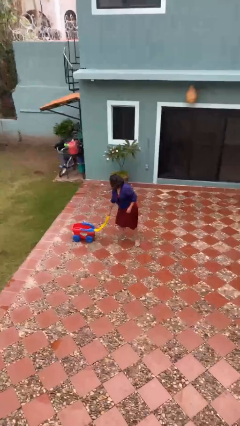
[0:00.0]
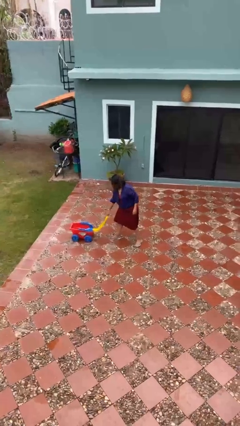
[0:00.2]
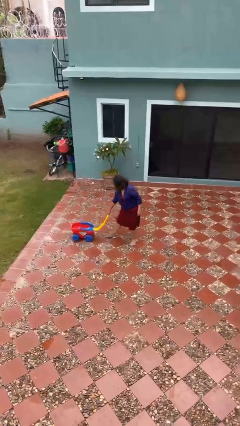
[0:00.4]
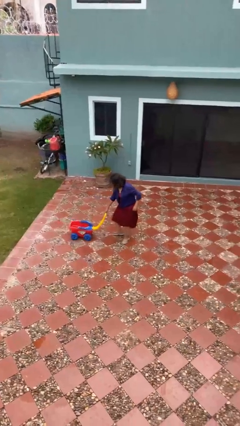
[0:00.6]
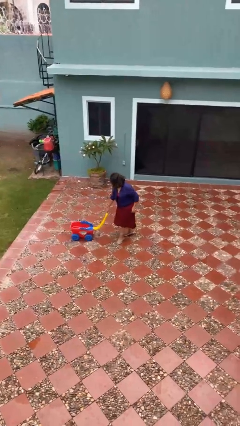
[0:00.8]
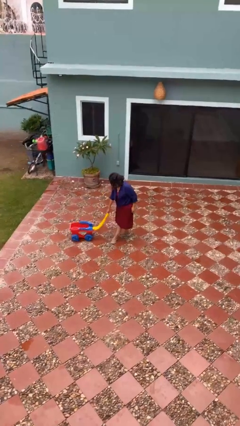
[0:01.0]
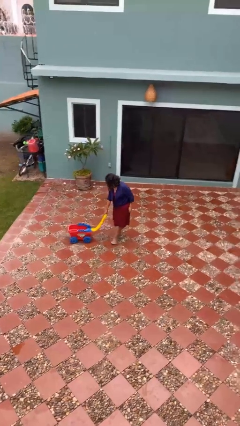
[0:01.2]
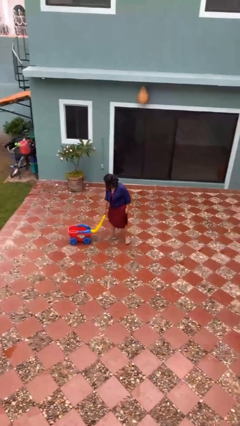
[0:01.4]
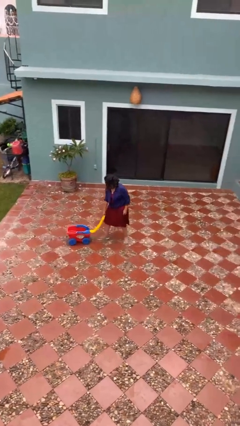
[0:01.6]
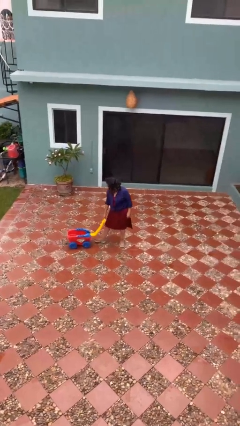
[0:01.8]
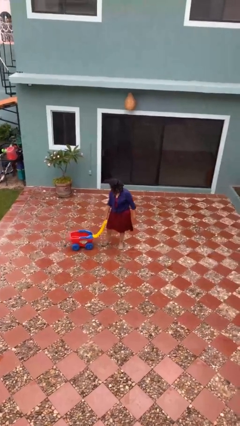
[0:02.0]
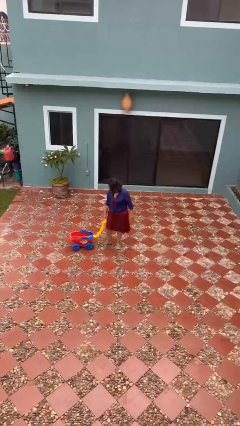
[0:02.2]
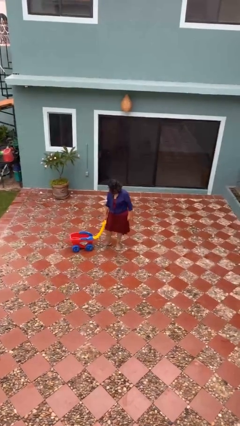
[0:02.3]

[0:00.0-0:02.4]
person pulls wheeled cart

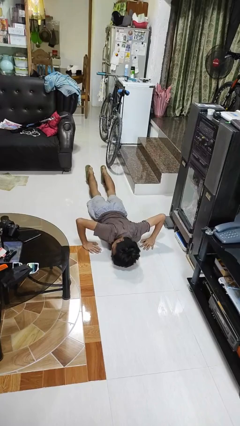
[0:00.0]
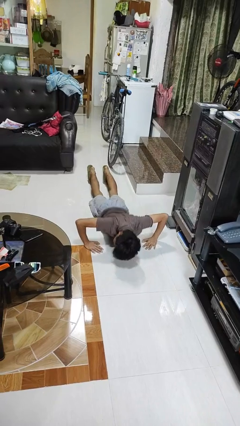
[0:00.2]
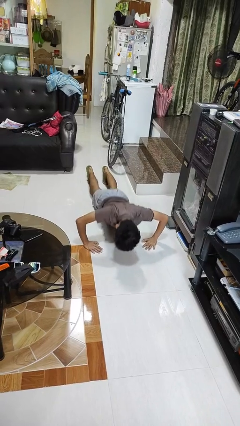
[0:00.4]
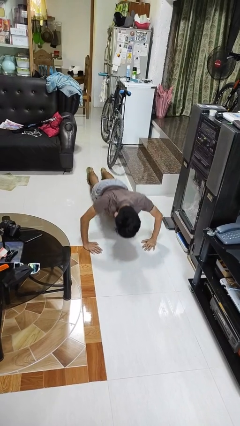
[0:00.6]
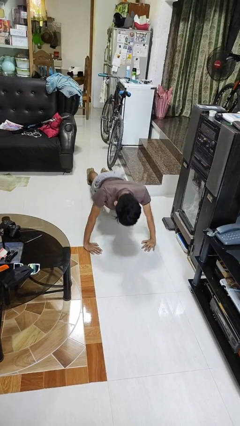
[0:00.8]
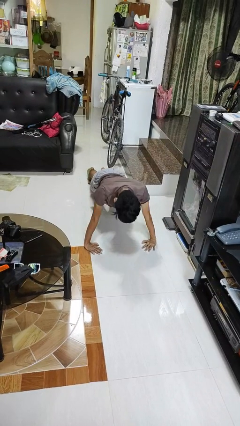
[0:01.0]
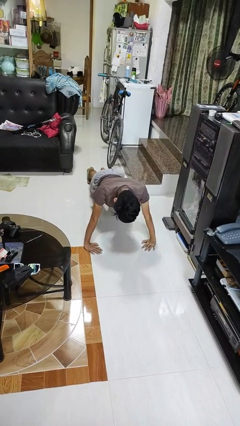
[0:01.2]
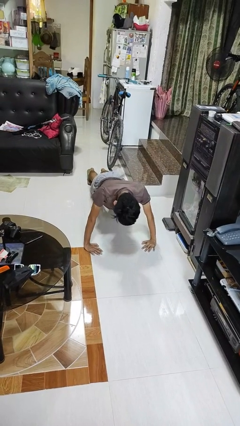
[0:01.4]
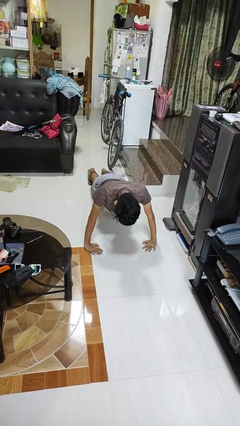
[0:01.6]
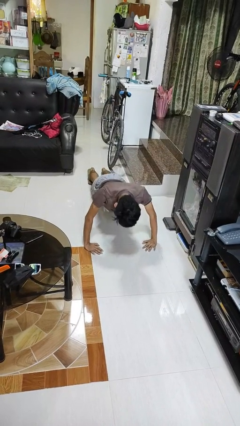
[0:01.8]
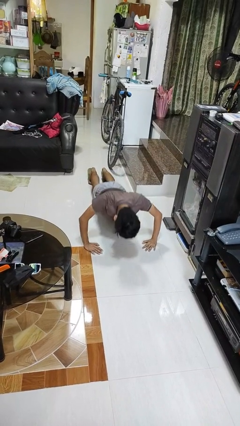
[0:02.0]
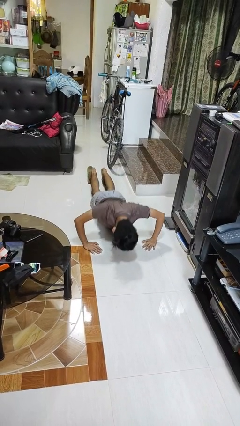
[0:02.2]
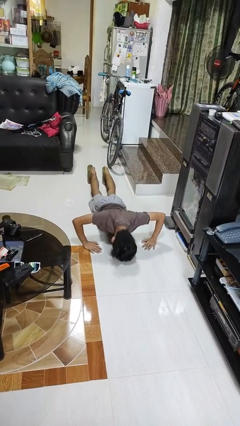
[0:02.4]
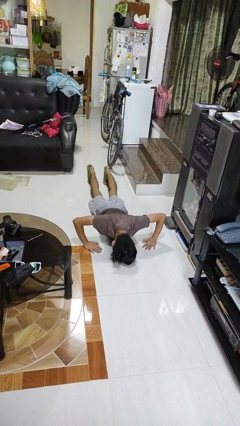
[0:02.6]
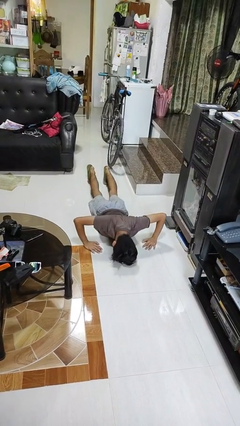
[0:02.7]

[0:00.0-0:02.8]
person exercises with pushup

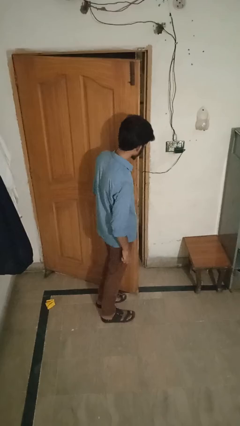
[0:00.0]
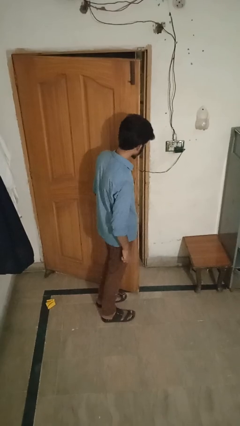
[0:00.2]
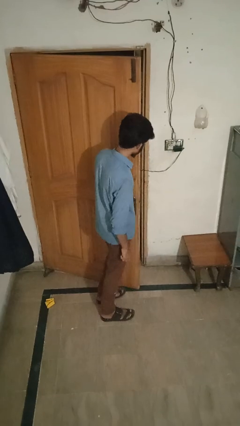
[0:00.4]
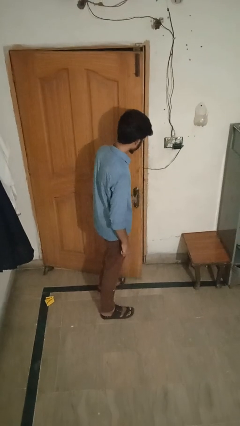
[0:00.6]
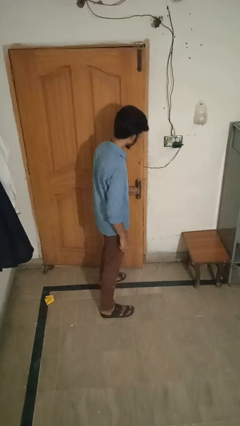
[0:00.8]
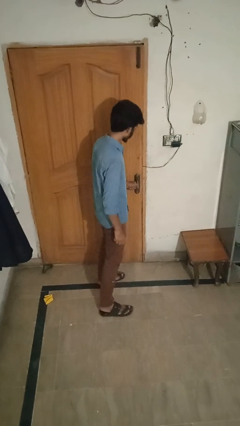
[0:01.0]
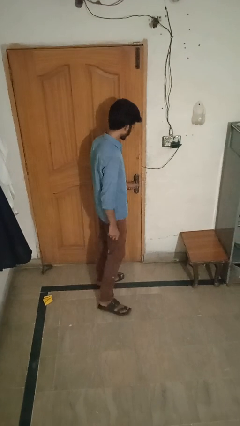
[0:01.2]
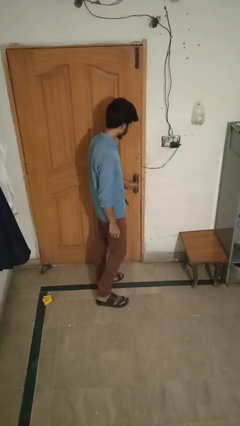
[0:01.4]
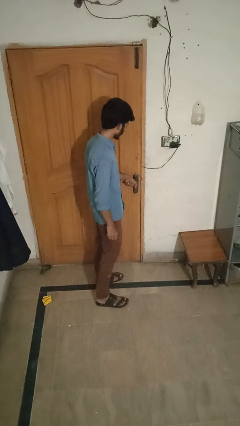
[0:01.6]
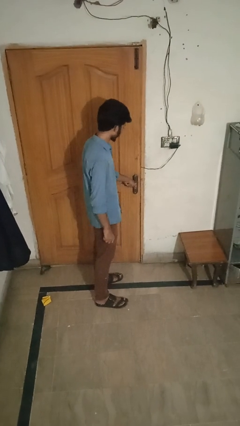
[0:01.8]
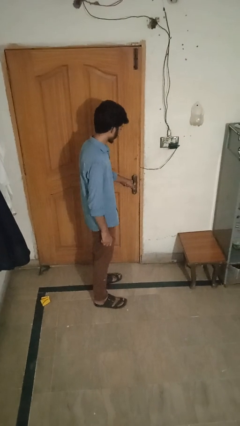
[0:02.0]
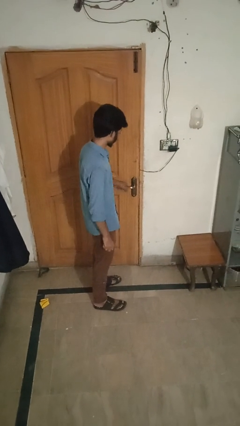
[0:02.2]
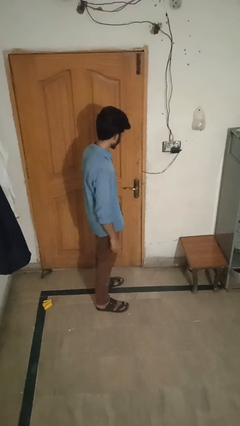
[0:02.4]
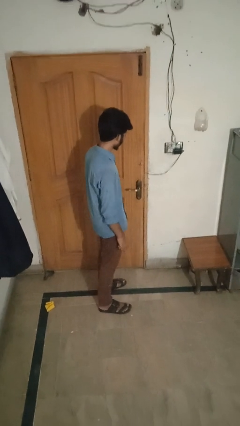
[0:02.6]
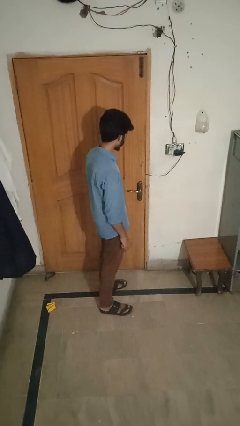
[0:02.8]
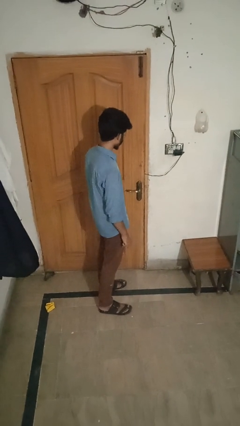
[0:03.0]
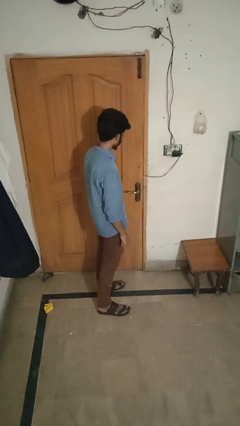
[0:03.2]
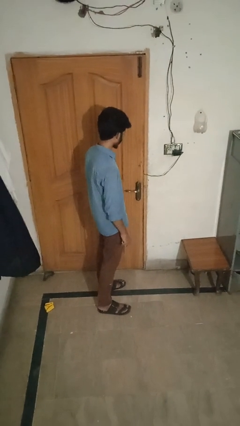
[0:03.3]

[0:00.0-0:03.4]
person closes facility door

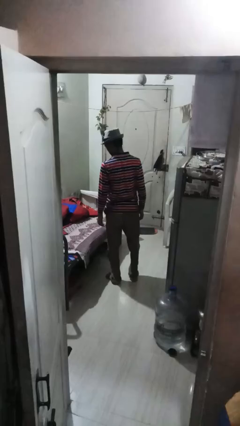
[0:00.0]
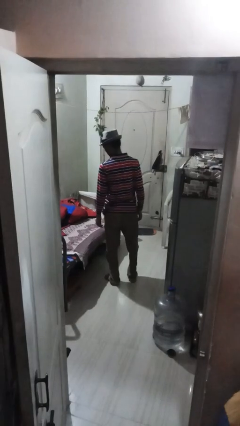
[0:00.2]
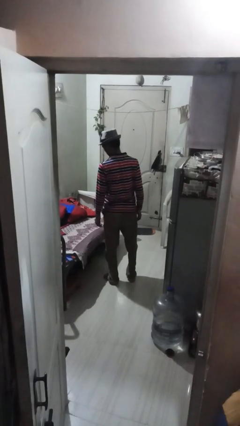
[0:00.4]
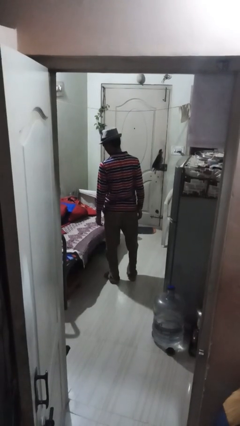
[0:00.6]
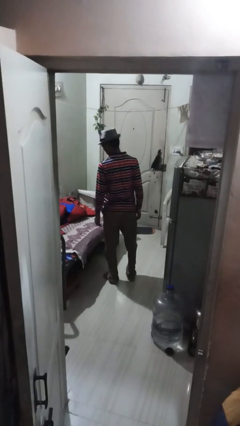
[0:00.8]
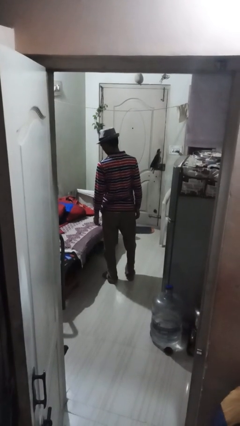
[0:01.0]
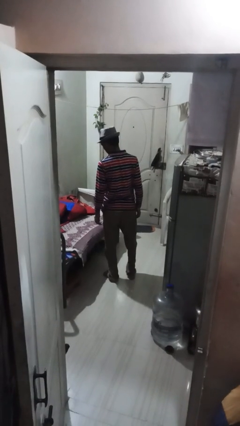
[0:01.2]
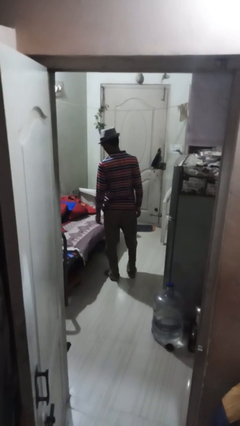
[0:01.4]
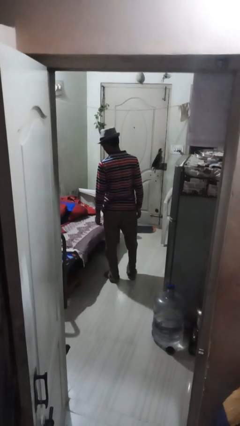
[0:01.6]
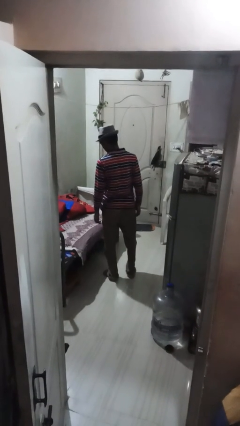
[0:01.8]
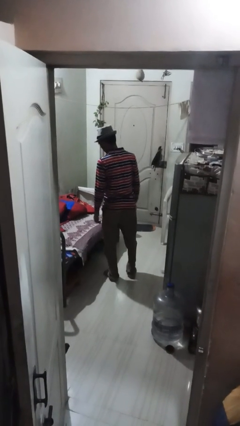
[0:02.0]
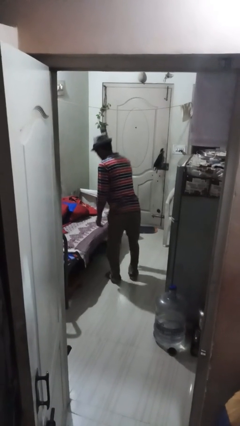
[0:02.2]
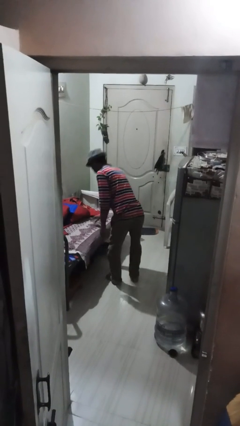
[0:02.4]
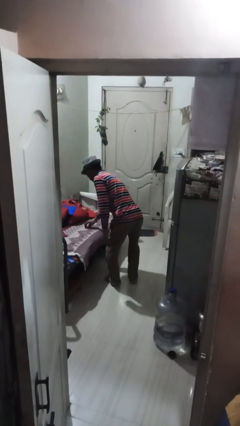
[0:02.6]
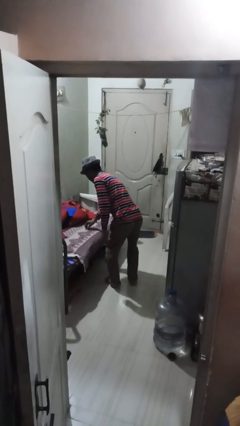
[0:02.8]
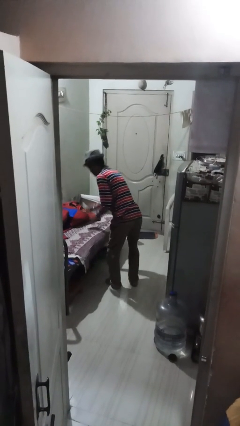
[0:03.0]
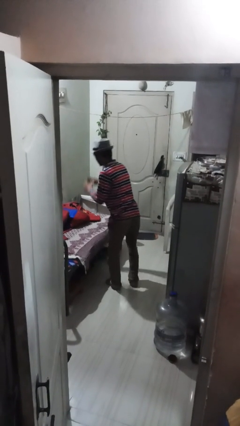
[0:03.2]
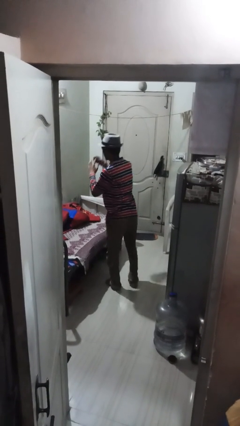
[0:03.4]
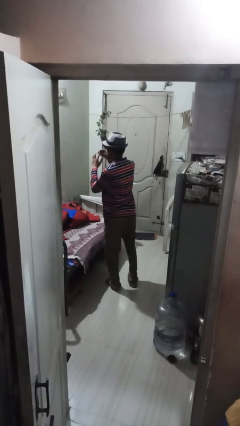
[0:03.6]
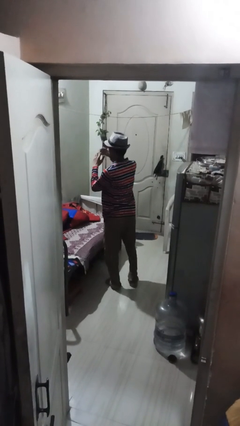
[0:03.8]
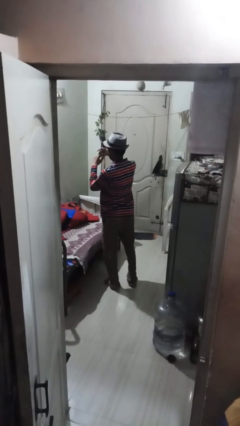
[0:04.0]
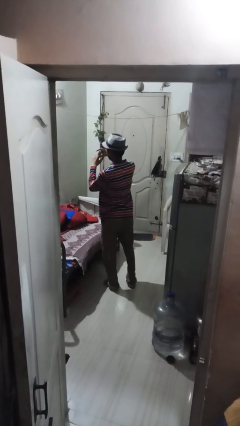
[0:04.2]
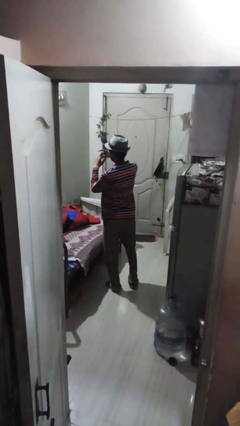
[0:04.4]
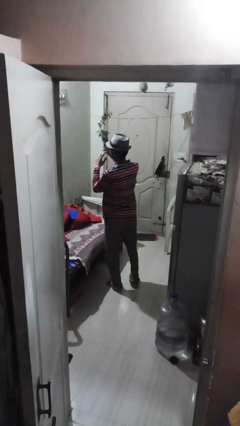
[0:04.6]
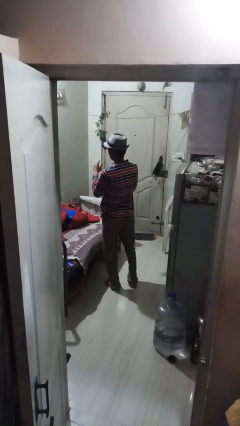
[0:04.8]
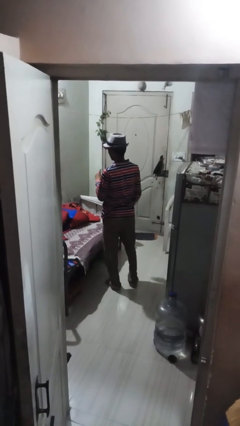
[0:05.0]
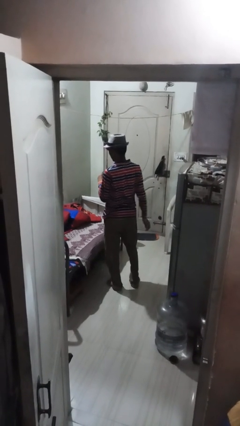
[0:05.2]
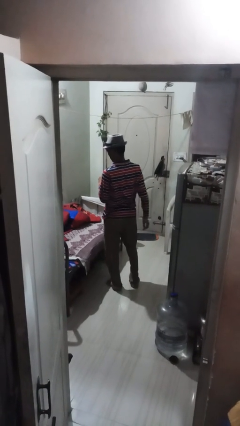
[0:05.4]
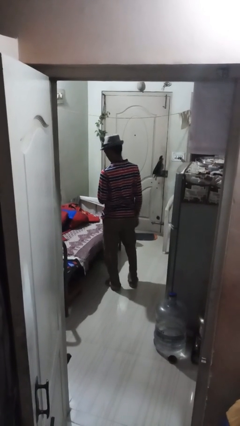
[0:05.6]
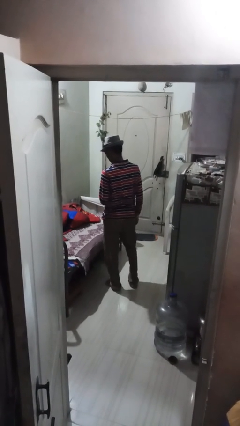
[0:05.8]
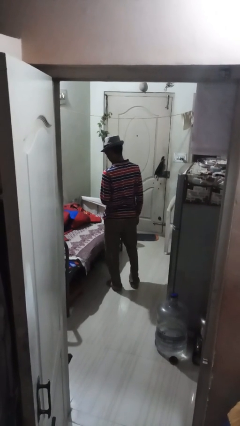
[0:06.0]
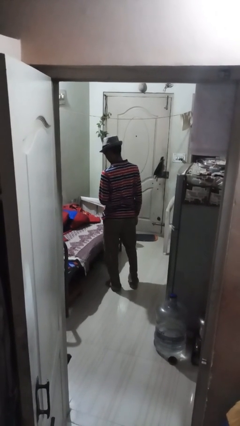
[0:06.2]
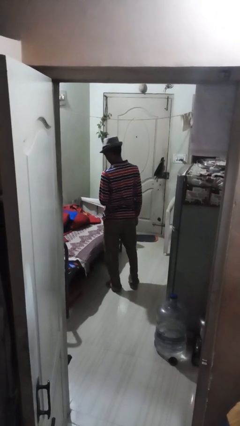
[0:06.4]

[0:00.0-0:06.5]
person puts on ring

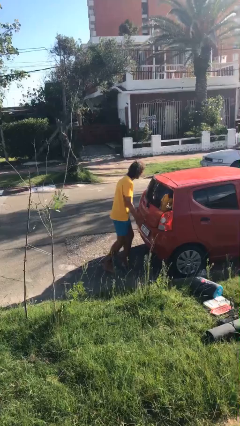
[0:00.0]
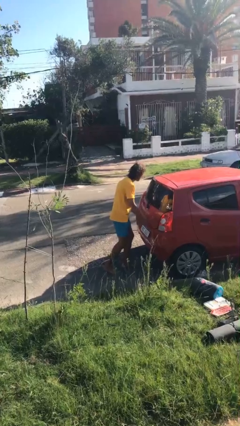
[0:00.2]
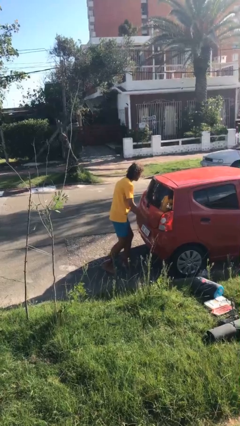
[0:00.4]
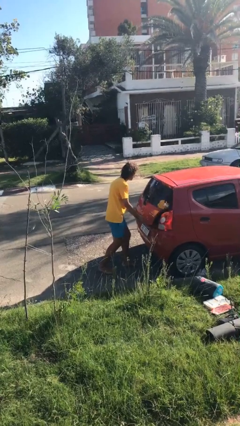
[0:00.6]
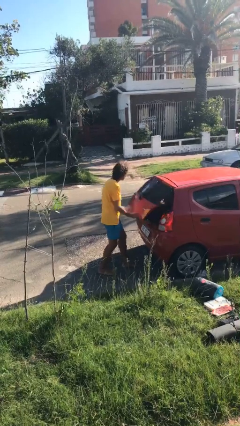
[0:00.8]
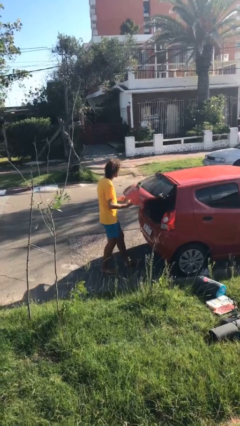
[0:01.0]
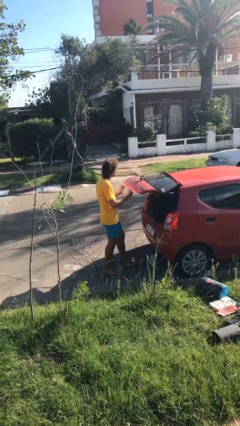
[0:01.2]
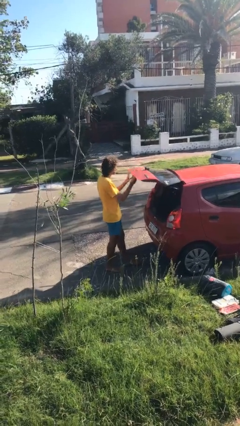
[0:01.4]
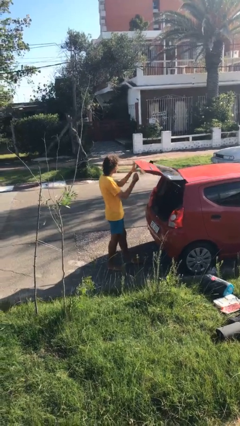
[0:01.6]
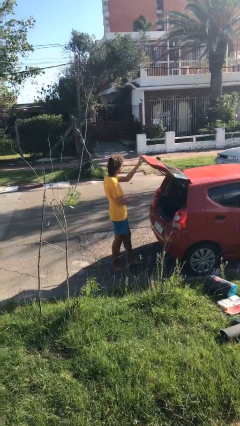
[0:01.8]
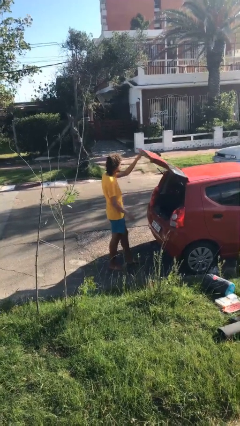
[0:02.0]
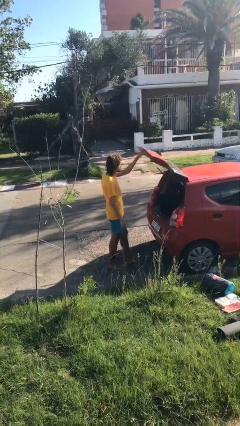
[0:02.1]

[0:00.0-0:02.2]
person opens car trunk

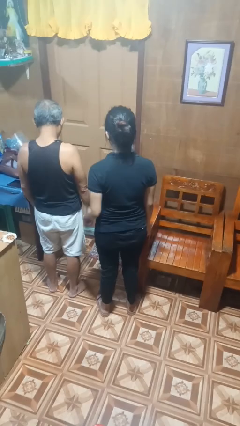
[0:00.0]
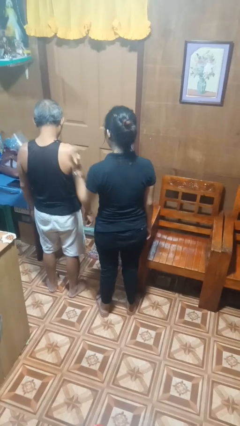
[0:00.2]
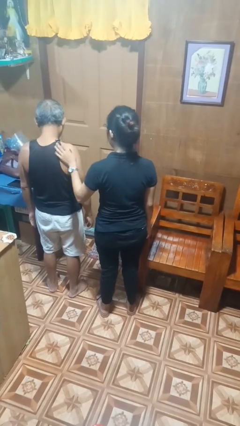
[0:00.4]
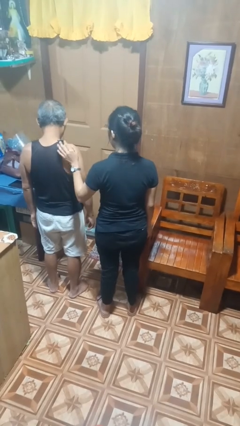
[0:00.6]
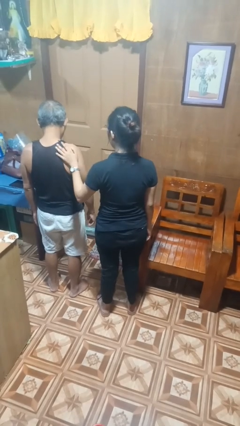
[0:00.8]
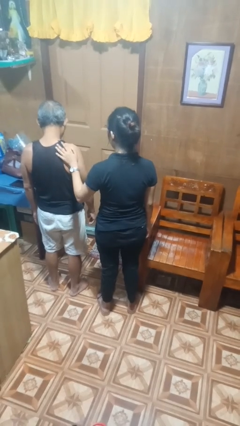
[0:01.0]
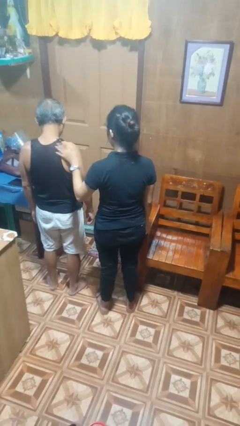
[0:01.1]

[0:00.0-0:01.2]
person pounds shoulders of person
